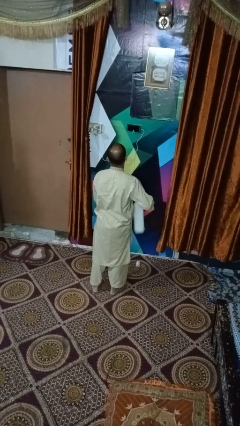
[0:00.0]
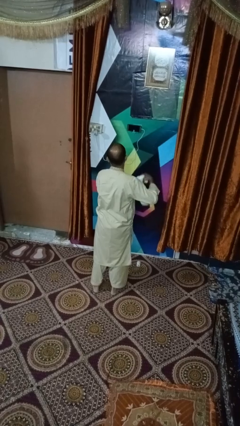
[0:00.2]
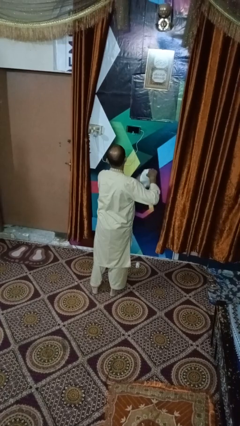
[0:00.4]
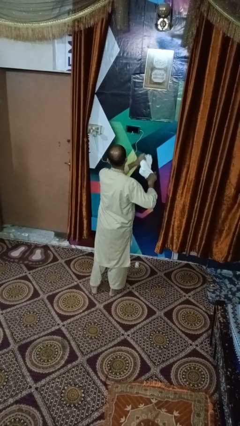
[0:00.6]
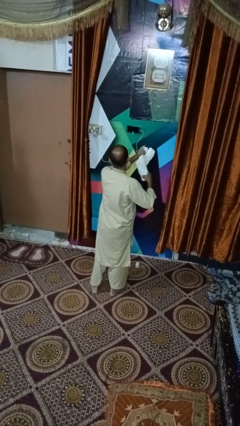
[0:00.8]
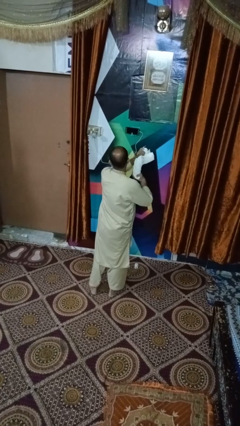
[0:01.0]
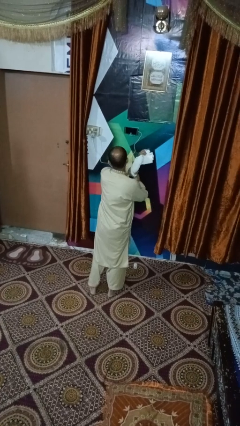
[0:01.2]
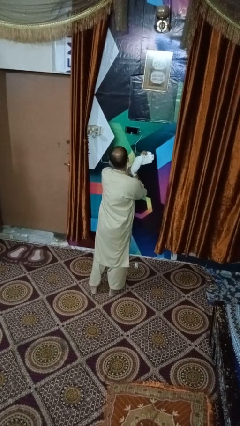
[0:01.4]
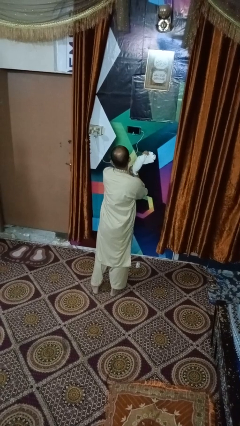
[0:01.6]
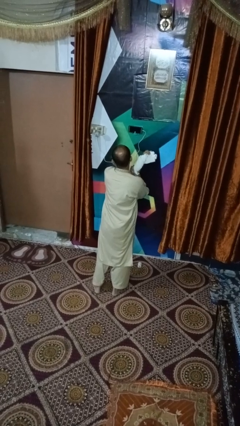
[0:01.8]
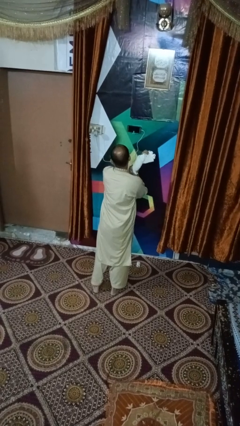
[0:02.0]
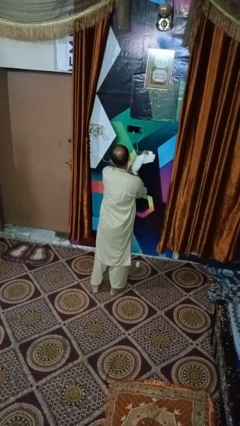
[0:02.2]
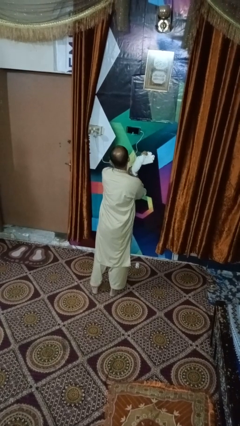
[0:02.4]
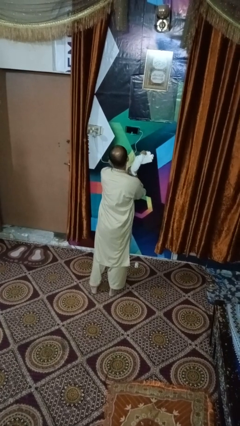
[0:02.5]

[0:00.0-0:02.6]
person squeezes object

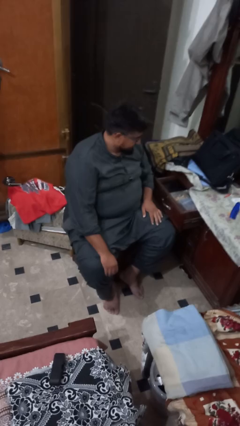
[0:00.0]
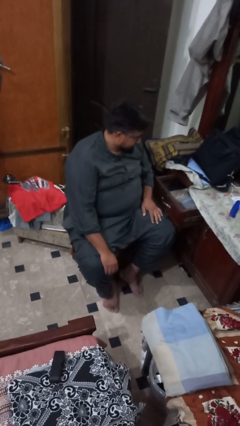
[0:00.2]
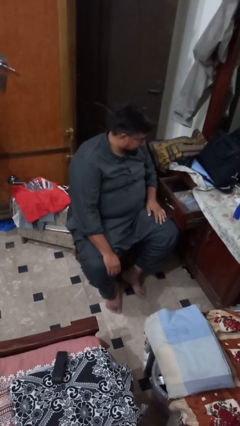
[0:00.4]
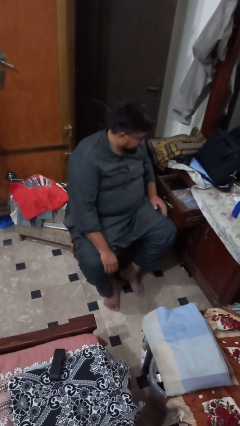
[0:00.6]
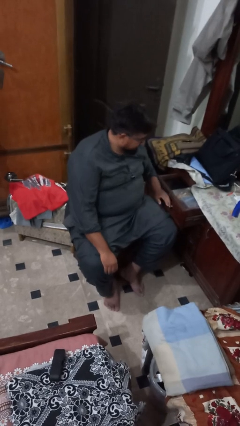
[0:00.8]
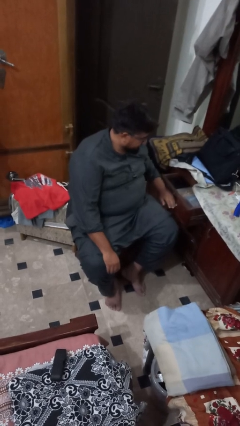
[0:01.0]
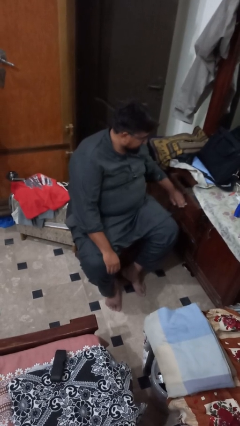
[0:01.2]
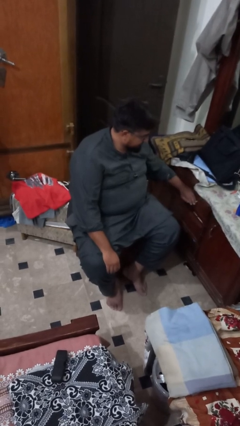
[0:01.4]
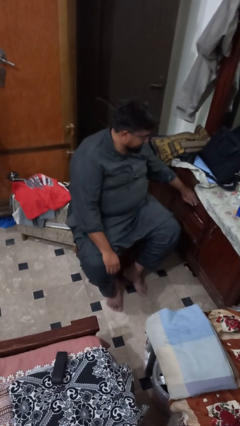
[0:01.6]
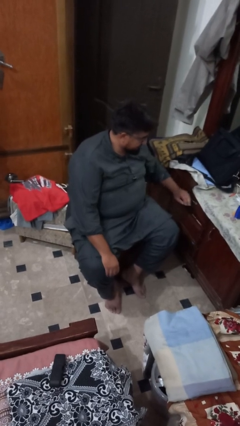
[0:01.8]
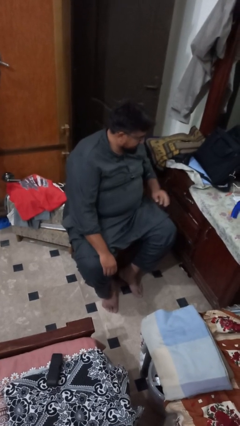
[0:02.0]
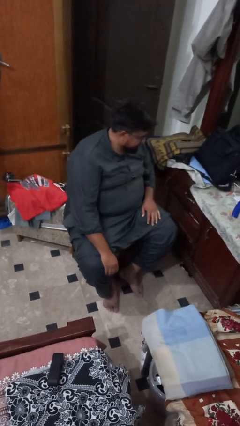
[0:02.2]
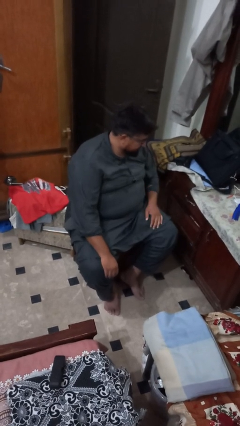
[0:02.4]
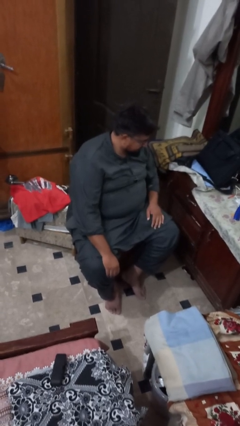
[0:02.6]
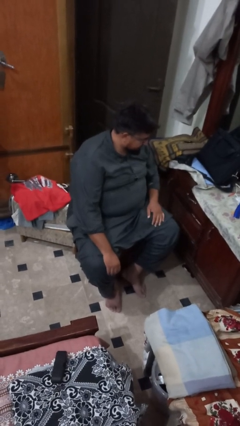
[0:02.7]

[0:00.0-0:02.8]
person closes dresser drawer

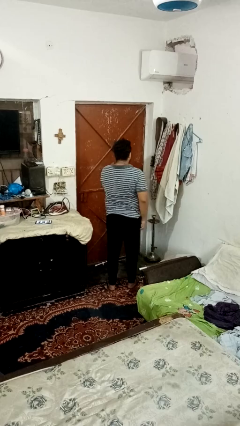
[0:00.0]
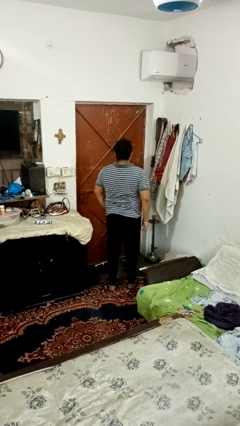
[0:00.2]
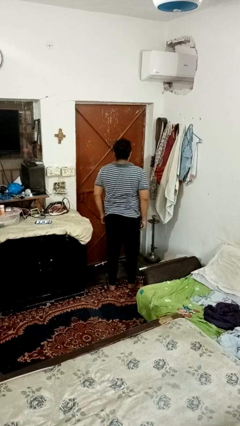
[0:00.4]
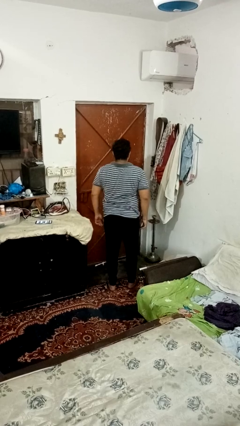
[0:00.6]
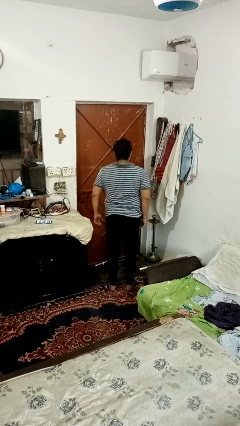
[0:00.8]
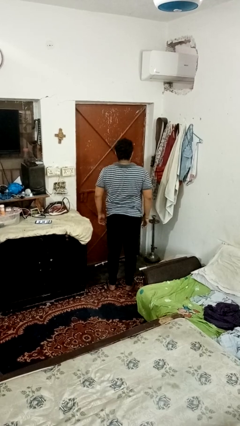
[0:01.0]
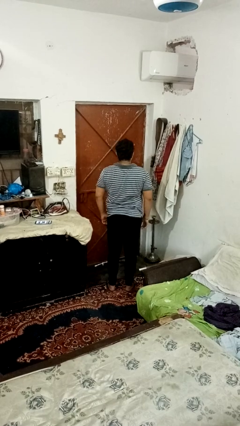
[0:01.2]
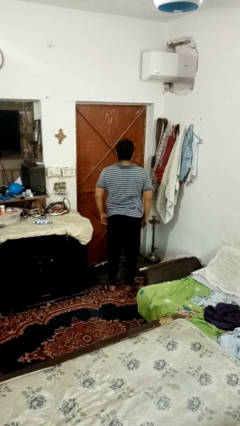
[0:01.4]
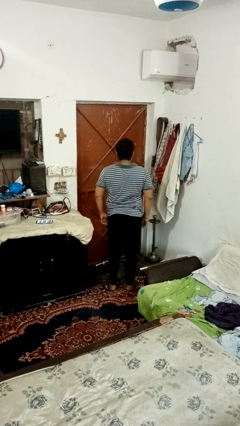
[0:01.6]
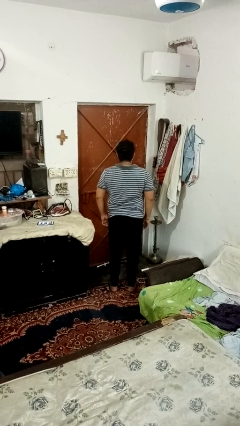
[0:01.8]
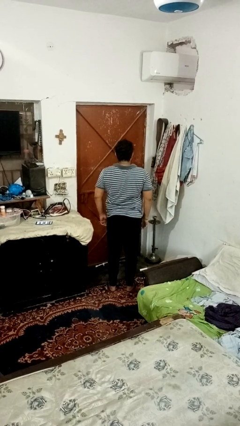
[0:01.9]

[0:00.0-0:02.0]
person dances in place

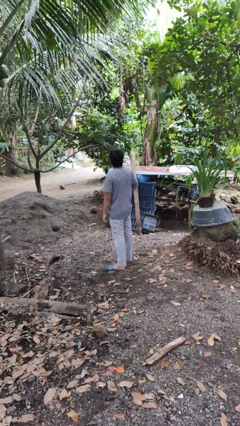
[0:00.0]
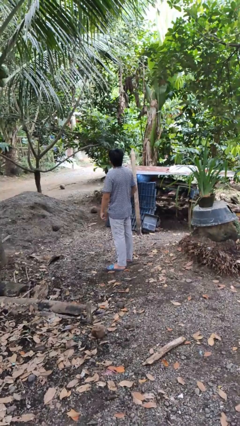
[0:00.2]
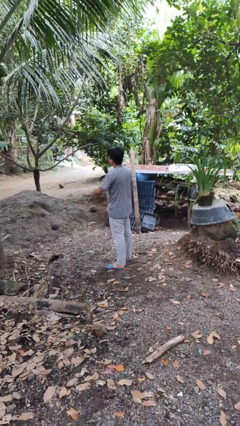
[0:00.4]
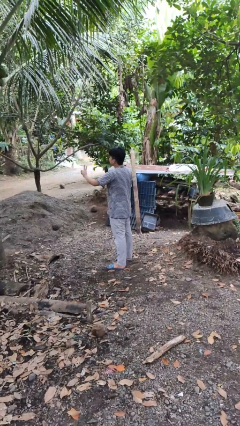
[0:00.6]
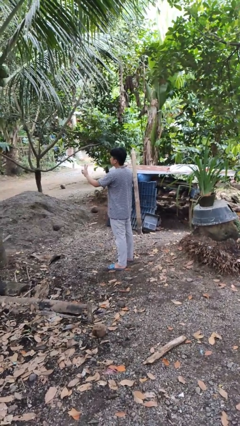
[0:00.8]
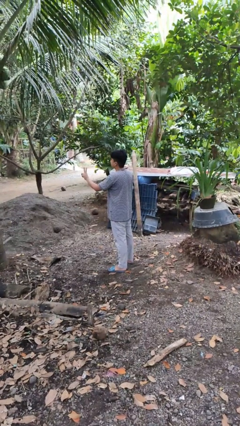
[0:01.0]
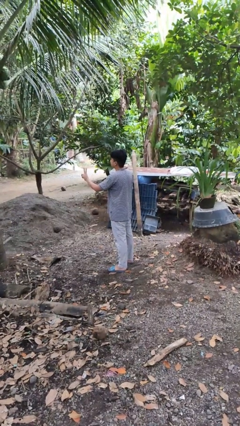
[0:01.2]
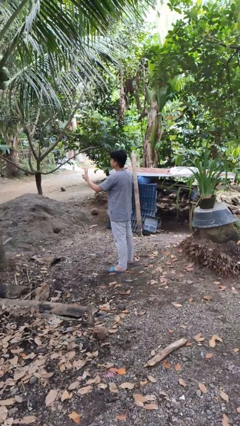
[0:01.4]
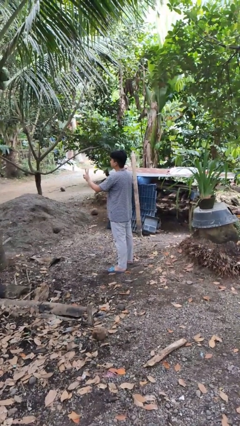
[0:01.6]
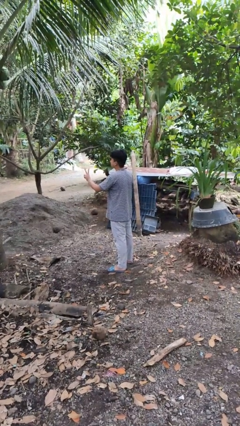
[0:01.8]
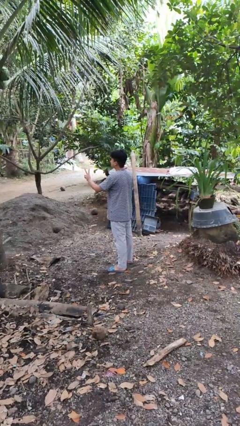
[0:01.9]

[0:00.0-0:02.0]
person gestures peace

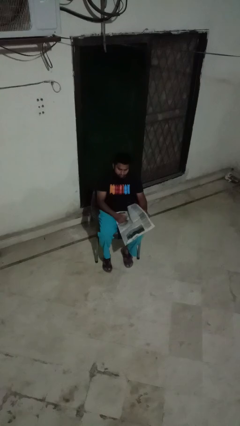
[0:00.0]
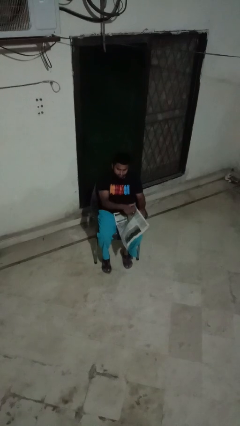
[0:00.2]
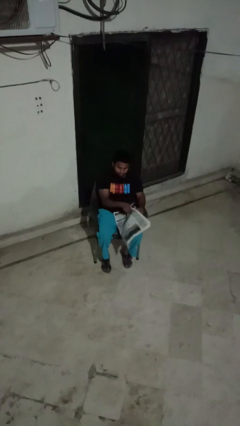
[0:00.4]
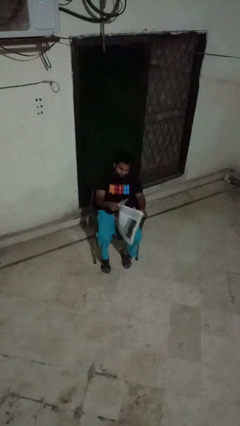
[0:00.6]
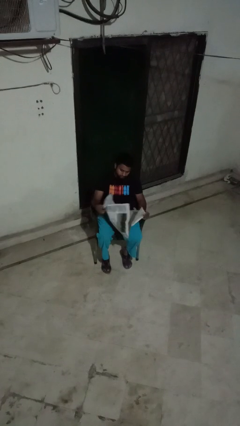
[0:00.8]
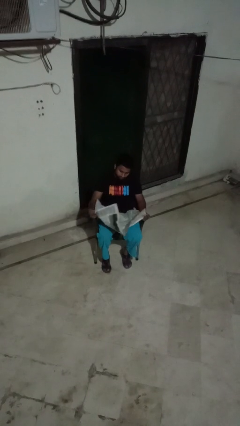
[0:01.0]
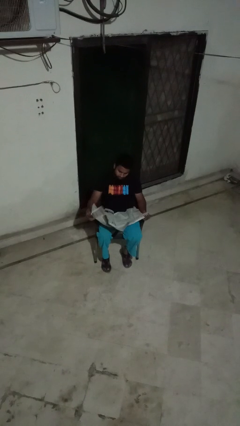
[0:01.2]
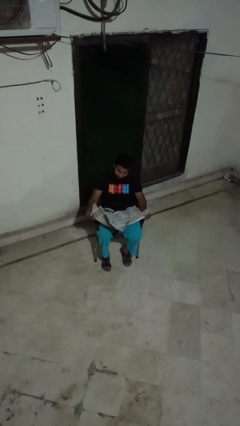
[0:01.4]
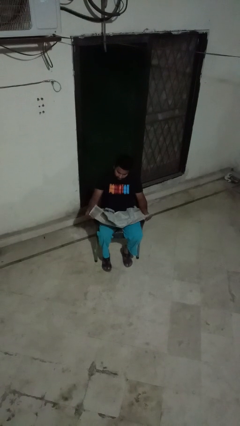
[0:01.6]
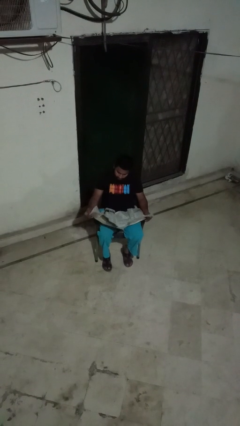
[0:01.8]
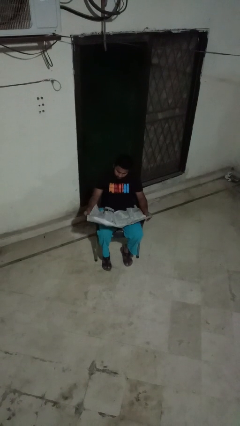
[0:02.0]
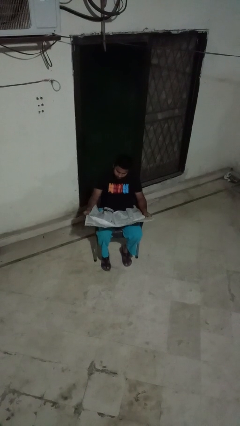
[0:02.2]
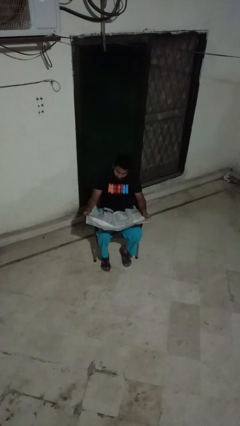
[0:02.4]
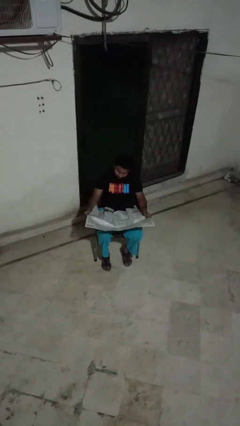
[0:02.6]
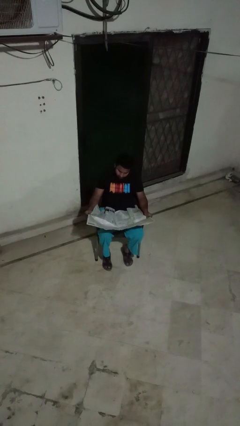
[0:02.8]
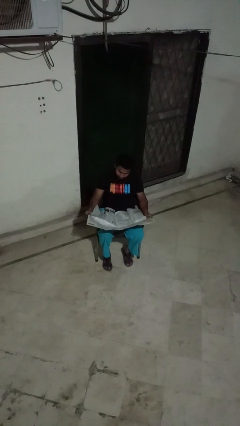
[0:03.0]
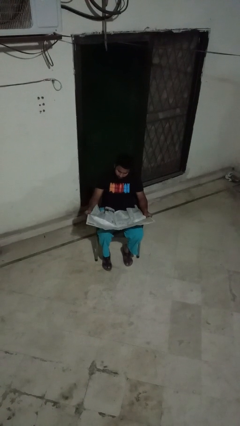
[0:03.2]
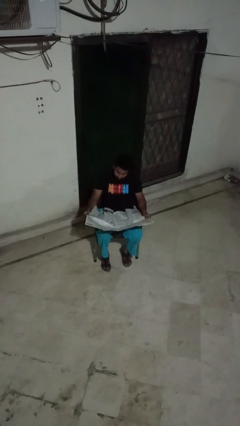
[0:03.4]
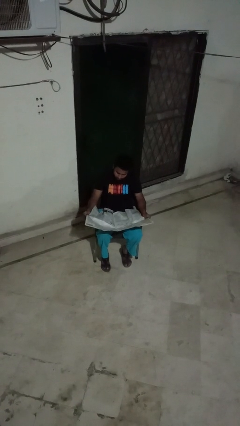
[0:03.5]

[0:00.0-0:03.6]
person reads newspaper

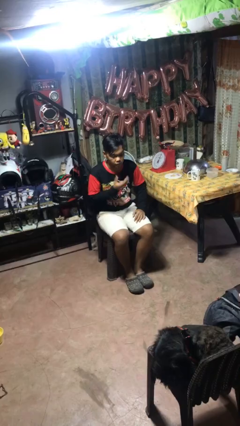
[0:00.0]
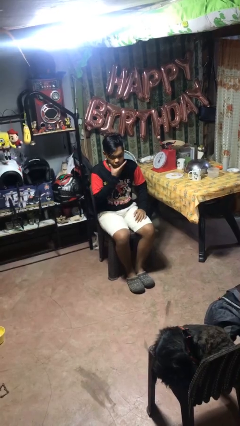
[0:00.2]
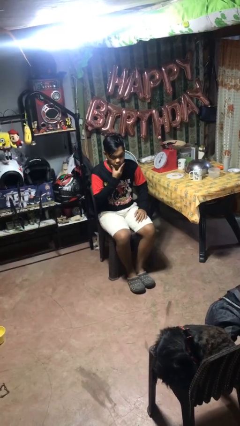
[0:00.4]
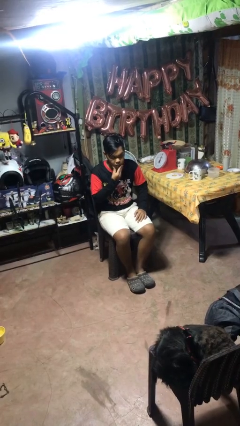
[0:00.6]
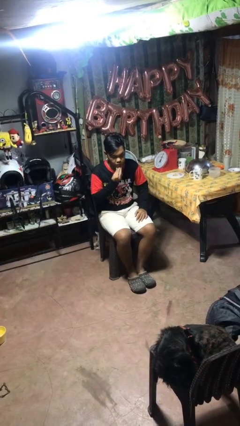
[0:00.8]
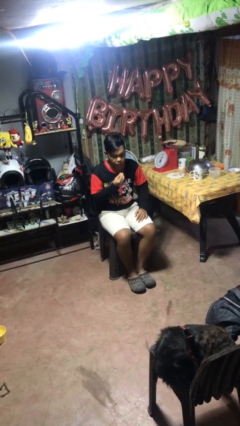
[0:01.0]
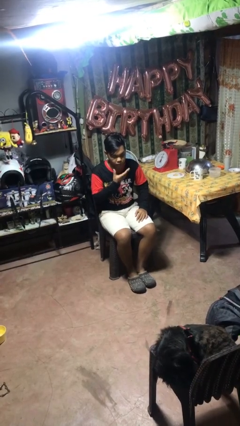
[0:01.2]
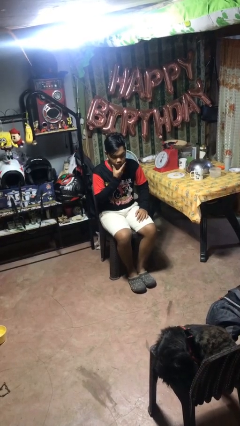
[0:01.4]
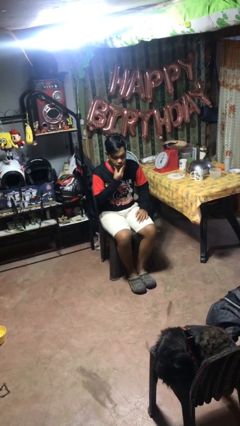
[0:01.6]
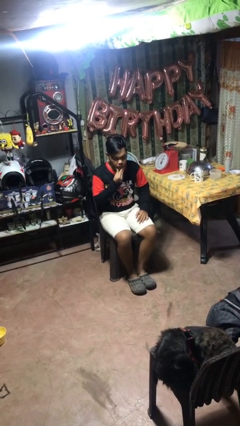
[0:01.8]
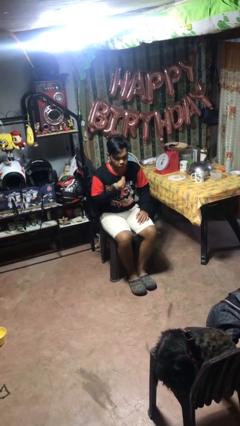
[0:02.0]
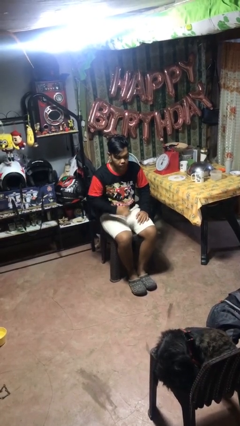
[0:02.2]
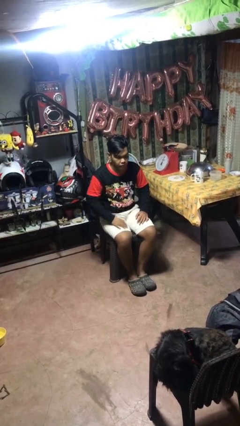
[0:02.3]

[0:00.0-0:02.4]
person strokes chin

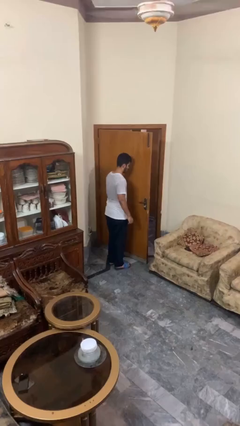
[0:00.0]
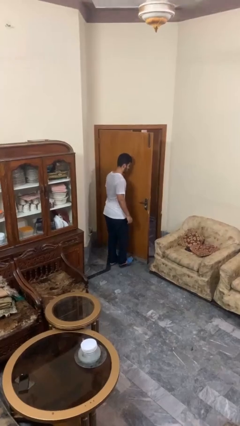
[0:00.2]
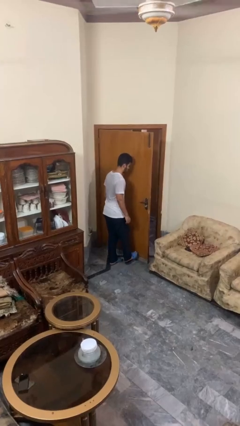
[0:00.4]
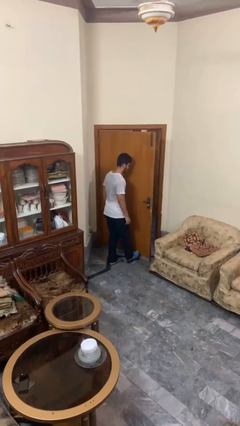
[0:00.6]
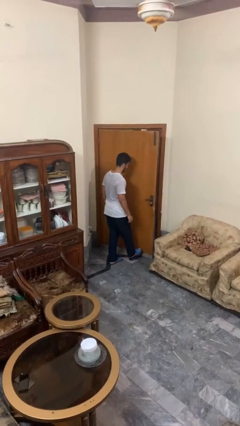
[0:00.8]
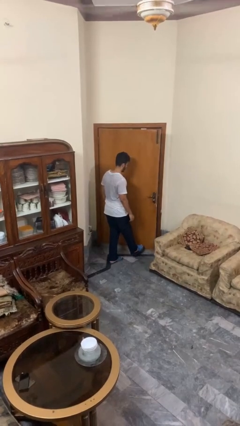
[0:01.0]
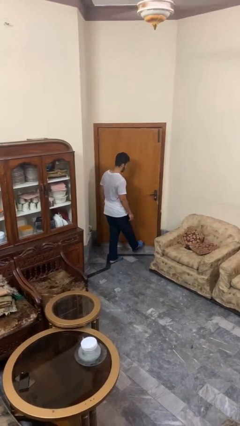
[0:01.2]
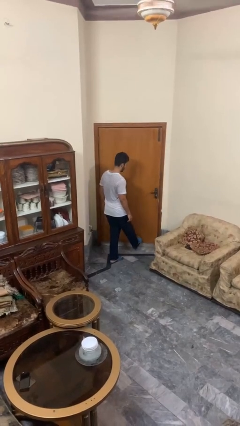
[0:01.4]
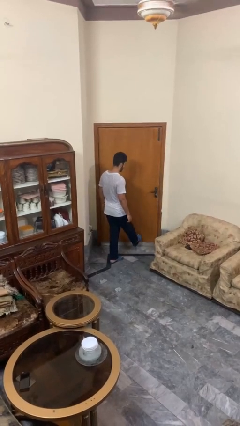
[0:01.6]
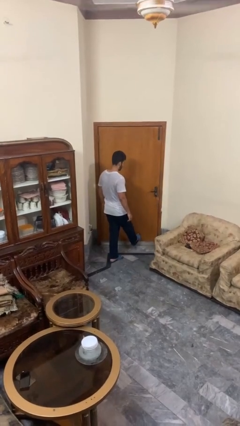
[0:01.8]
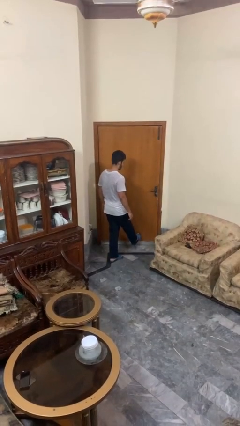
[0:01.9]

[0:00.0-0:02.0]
person closes door with foot
